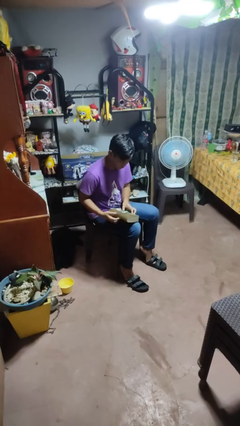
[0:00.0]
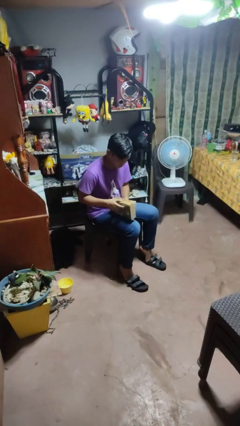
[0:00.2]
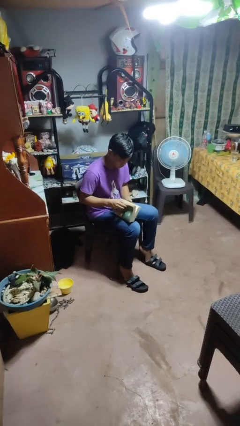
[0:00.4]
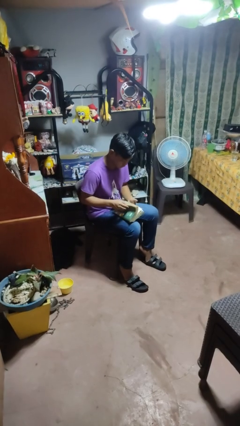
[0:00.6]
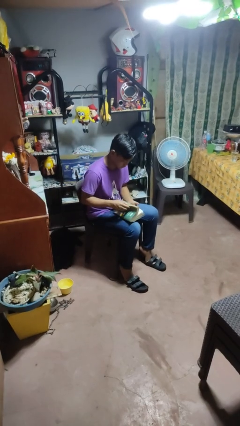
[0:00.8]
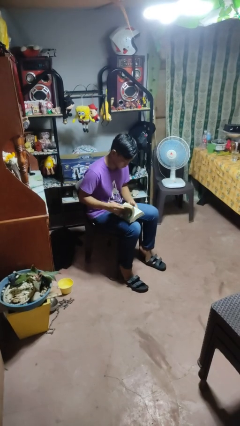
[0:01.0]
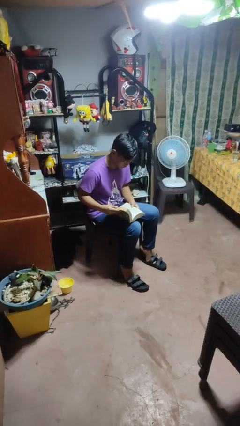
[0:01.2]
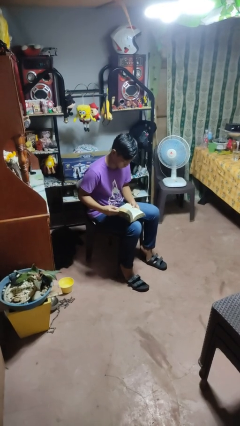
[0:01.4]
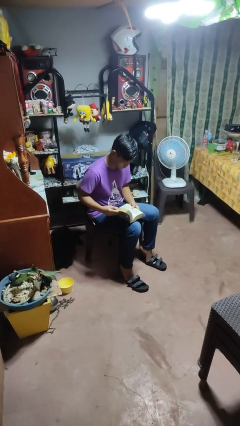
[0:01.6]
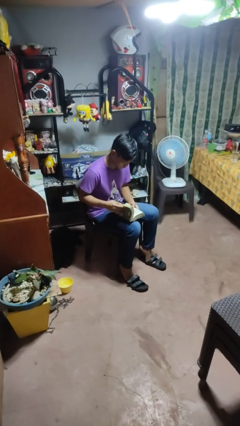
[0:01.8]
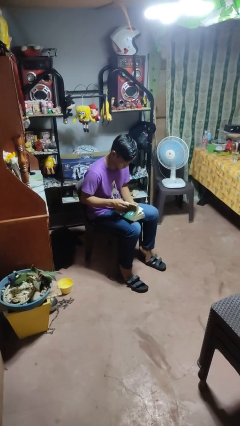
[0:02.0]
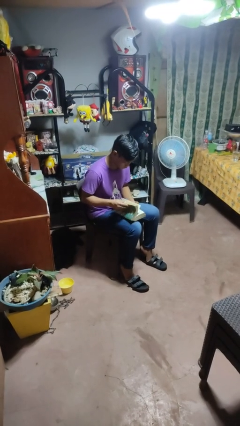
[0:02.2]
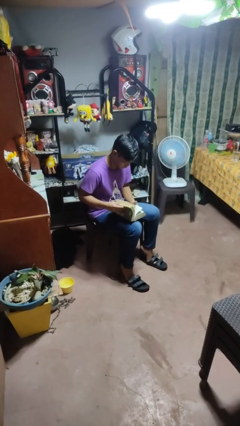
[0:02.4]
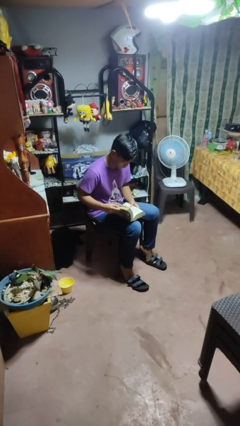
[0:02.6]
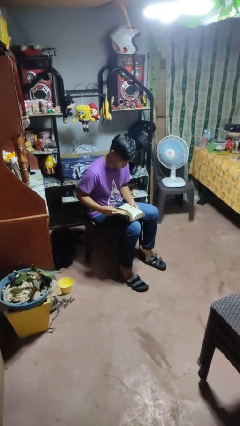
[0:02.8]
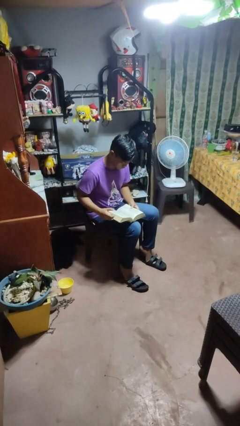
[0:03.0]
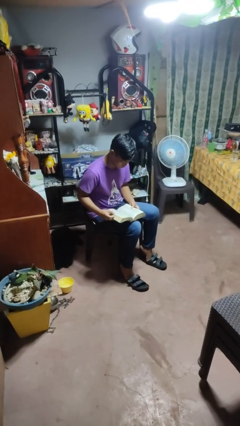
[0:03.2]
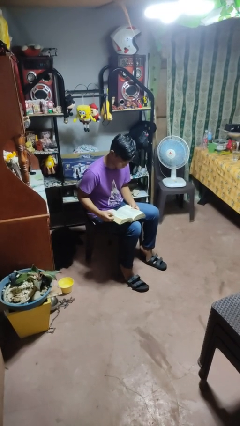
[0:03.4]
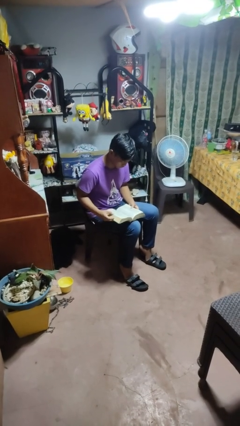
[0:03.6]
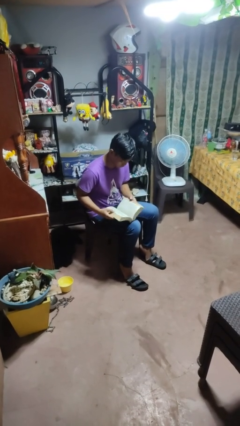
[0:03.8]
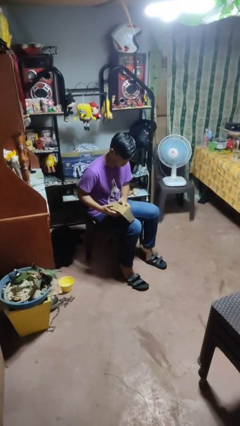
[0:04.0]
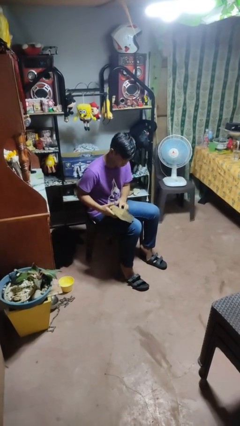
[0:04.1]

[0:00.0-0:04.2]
person reads book

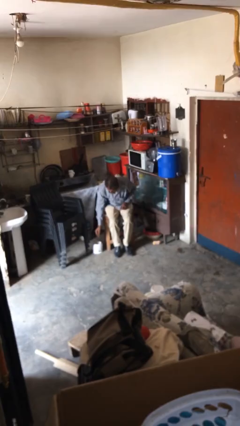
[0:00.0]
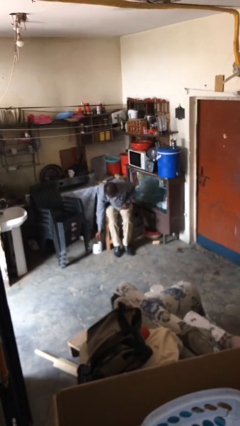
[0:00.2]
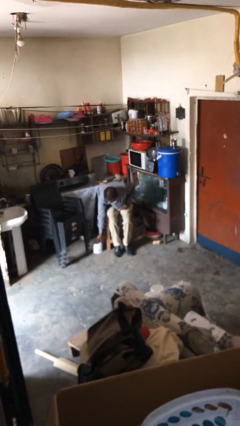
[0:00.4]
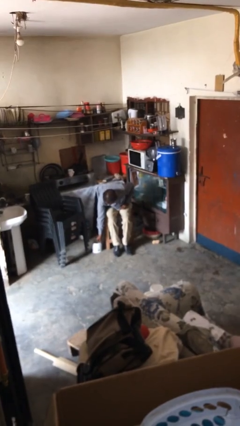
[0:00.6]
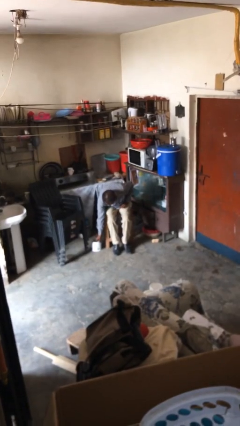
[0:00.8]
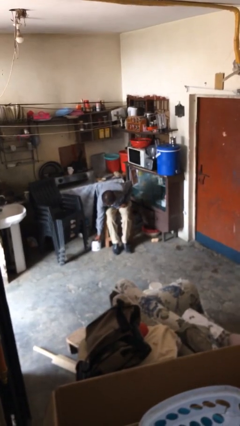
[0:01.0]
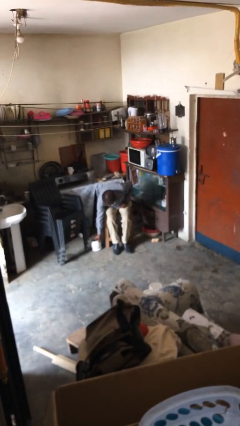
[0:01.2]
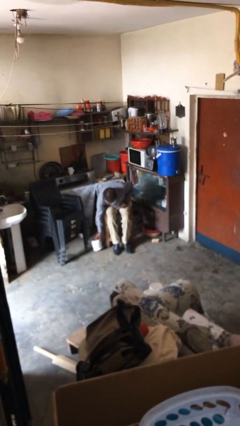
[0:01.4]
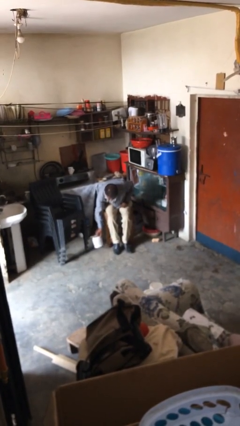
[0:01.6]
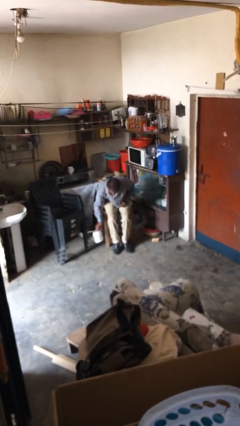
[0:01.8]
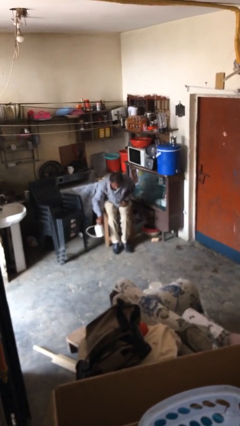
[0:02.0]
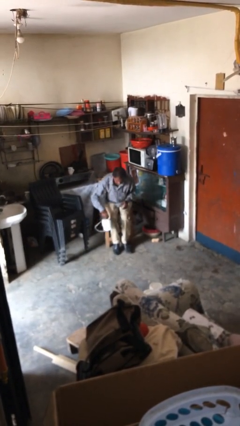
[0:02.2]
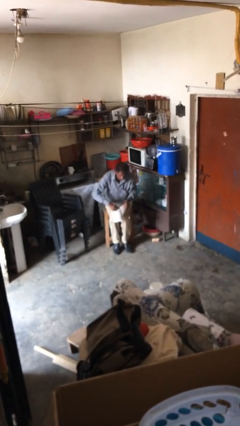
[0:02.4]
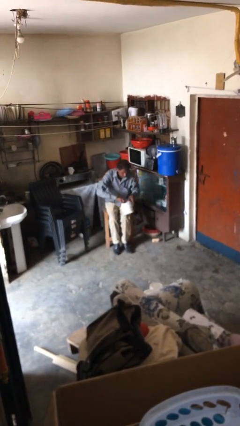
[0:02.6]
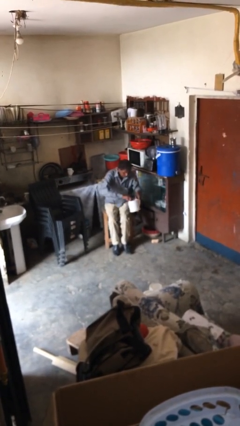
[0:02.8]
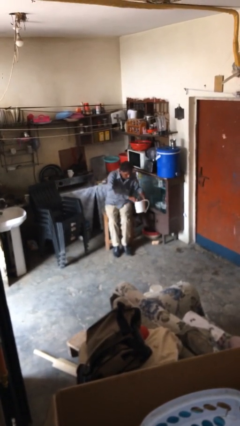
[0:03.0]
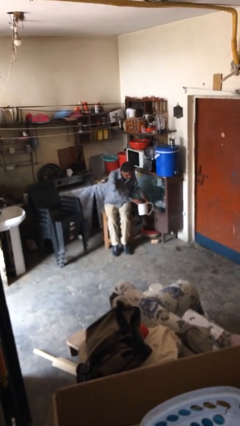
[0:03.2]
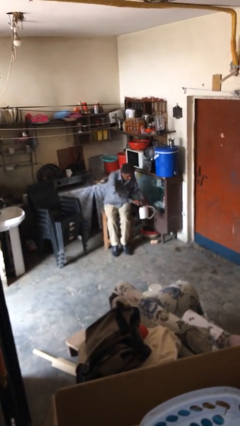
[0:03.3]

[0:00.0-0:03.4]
person picks up object from floor

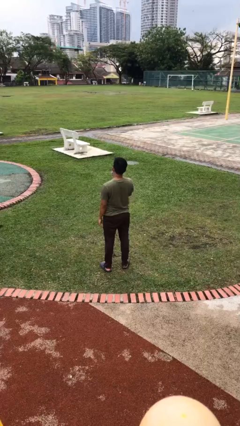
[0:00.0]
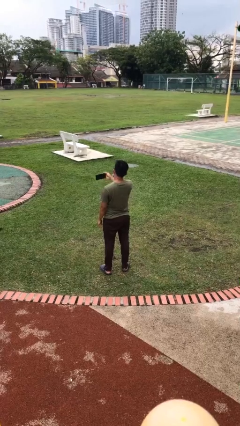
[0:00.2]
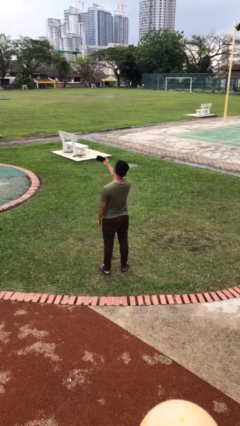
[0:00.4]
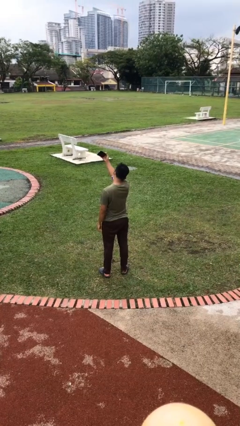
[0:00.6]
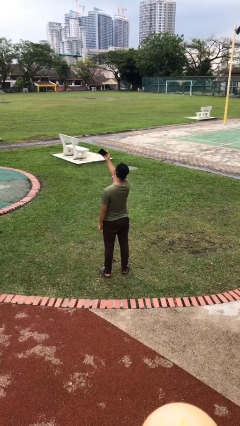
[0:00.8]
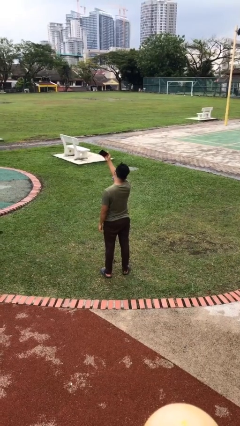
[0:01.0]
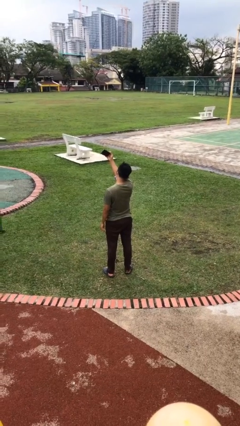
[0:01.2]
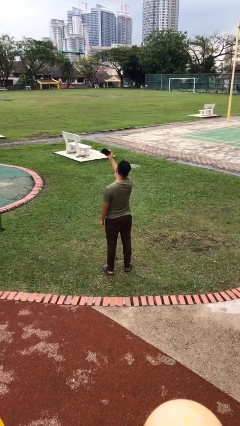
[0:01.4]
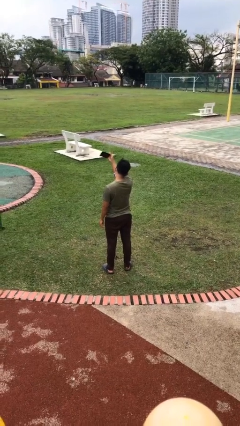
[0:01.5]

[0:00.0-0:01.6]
person takes selfie

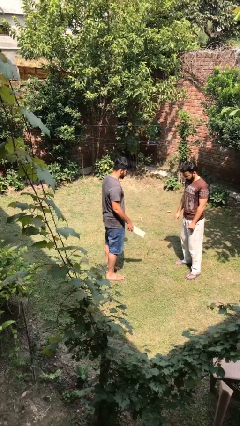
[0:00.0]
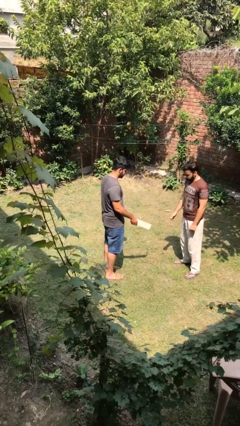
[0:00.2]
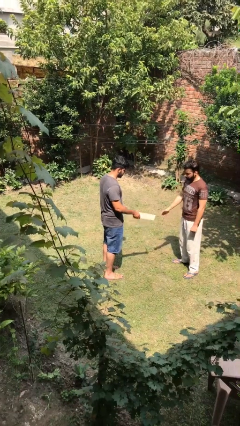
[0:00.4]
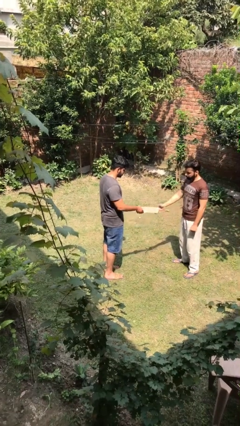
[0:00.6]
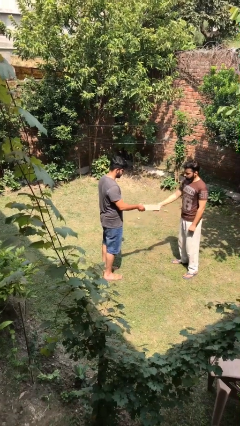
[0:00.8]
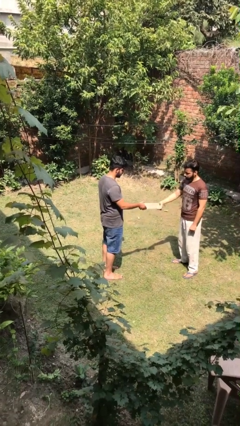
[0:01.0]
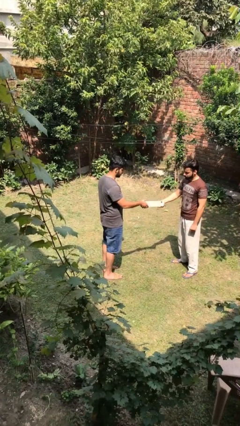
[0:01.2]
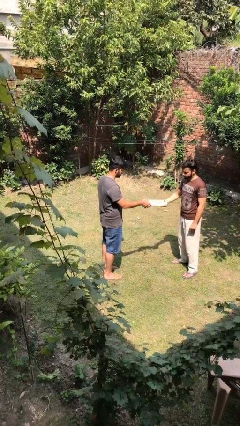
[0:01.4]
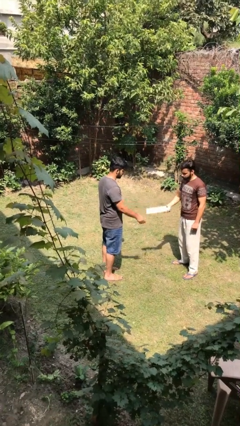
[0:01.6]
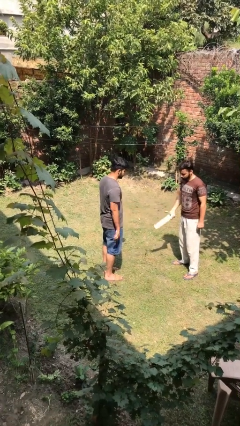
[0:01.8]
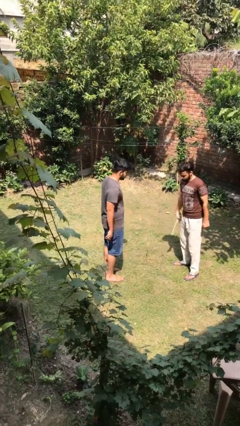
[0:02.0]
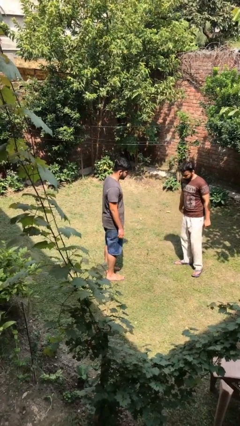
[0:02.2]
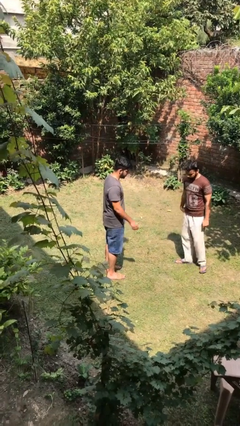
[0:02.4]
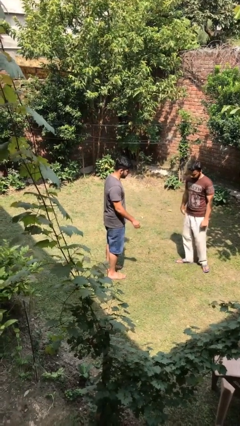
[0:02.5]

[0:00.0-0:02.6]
person transfers object to person

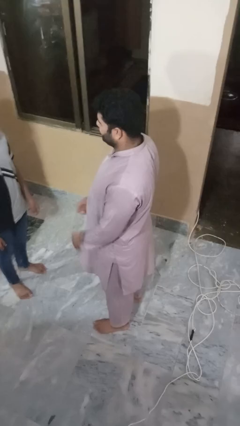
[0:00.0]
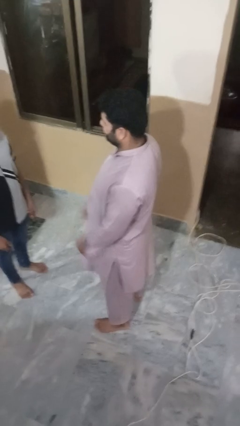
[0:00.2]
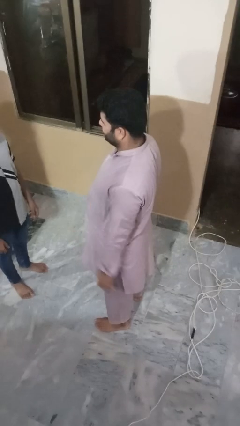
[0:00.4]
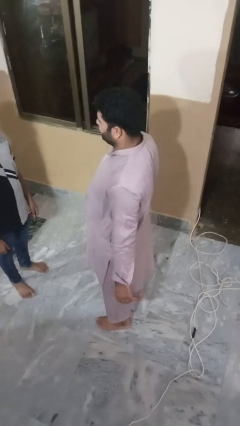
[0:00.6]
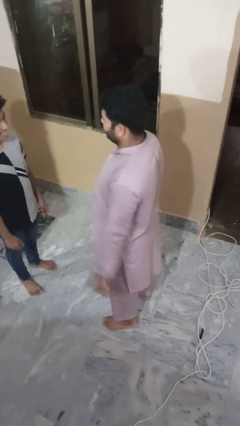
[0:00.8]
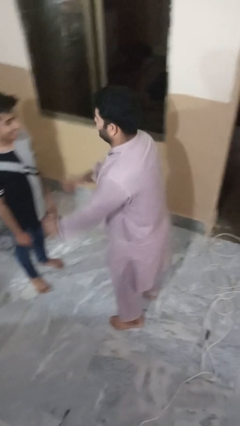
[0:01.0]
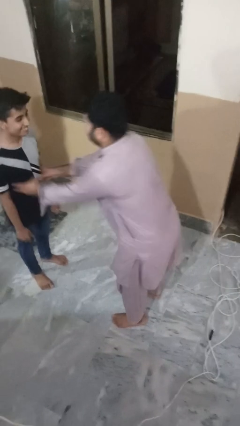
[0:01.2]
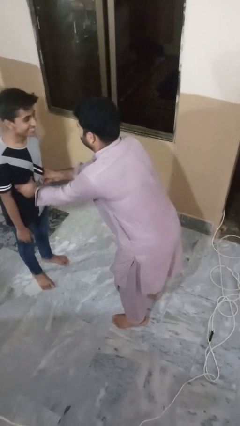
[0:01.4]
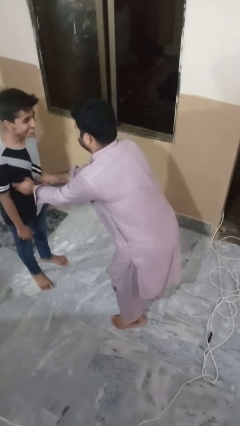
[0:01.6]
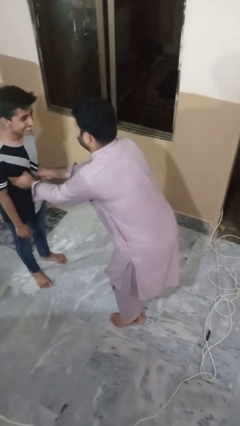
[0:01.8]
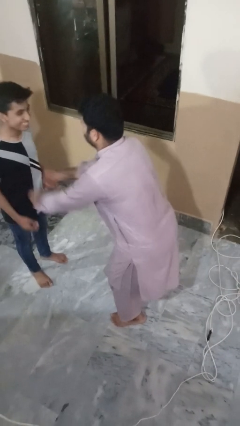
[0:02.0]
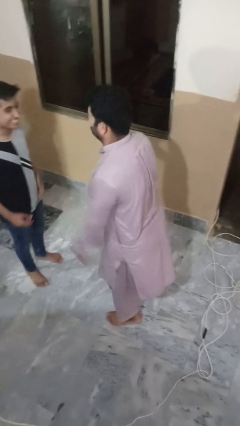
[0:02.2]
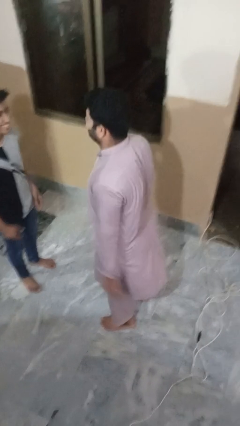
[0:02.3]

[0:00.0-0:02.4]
person tickles person

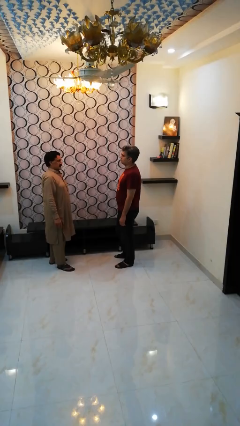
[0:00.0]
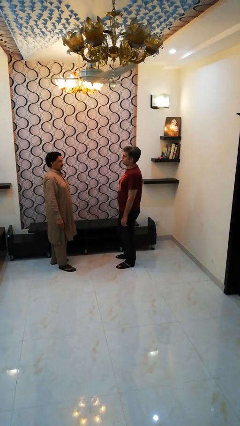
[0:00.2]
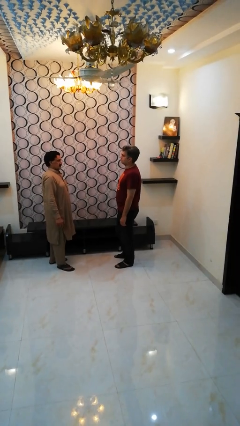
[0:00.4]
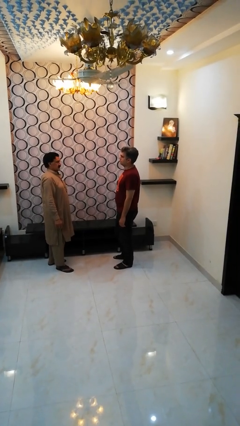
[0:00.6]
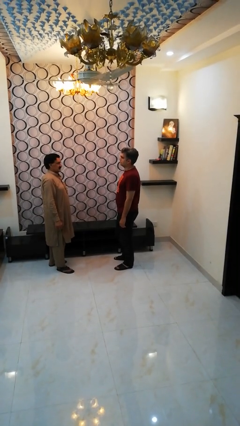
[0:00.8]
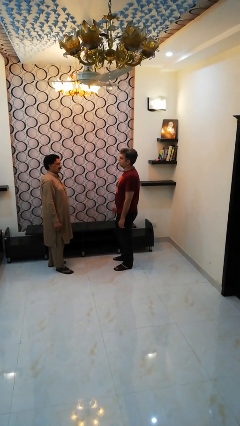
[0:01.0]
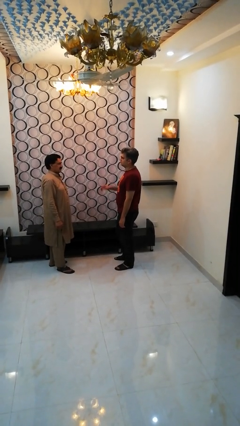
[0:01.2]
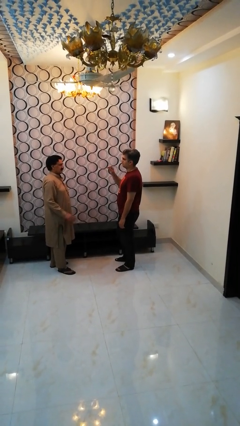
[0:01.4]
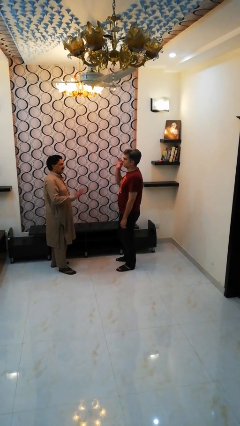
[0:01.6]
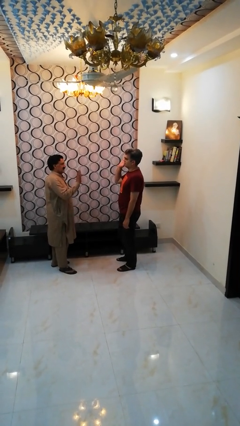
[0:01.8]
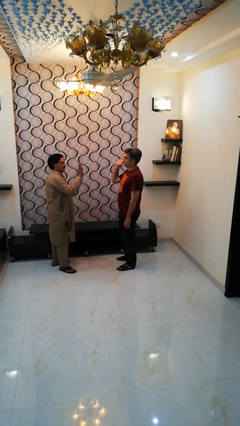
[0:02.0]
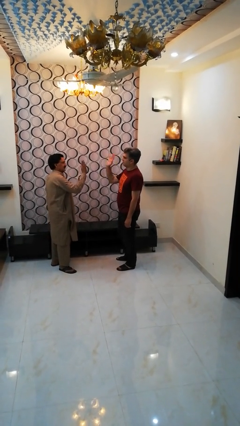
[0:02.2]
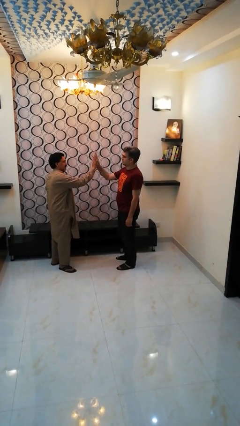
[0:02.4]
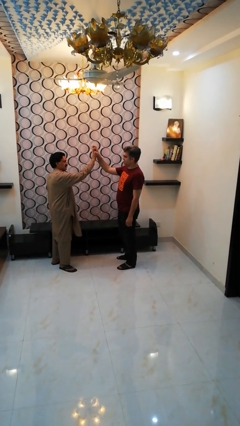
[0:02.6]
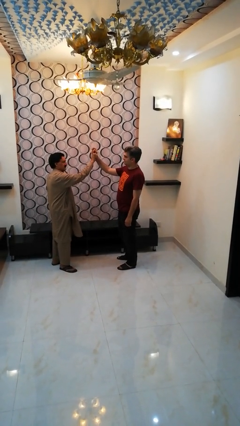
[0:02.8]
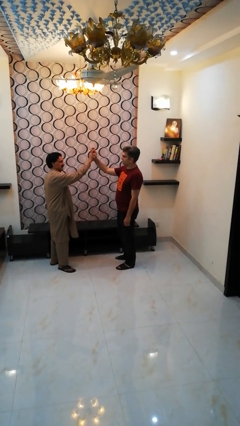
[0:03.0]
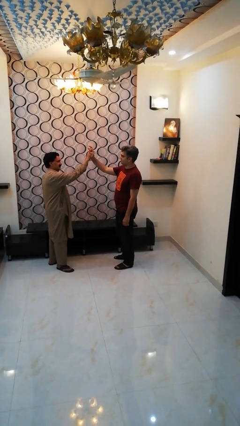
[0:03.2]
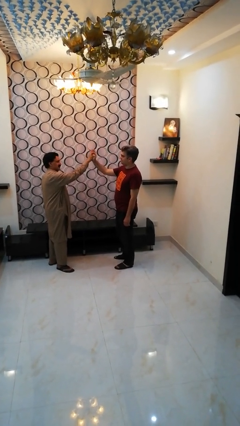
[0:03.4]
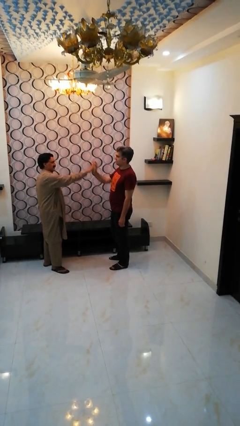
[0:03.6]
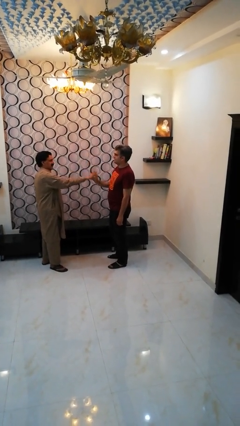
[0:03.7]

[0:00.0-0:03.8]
person highfives hand
